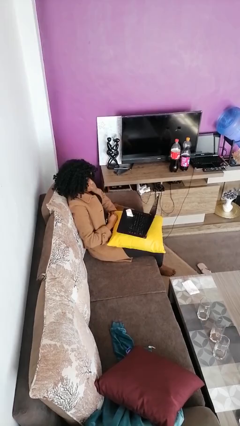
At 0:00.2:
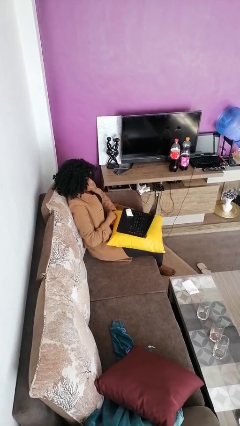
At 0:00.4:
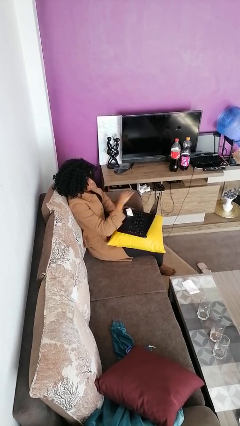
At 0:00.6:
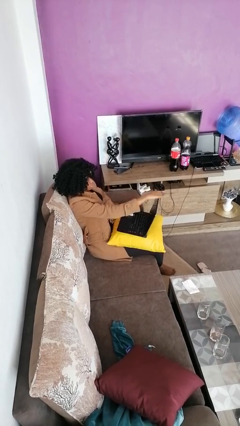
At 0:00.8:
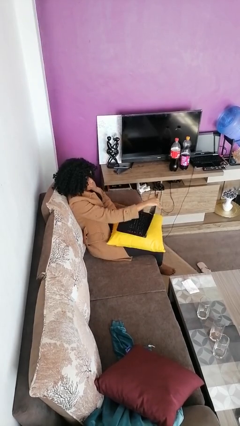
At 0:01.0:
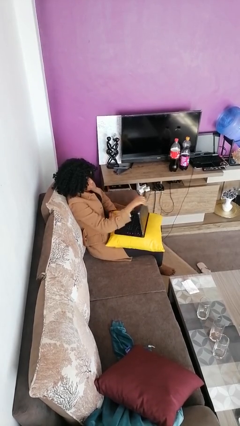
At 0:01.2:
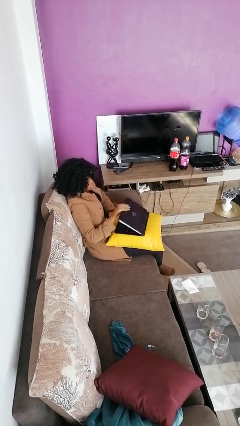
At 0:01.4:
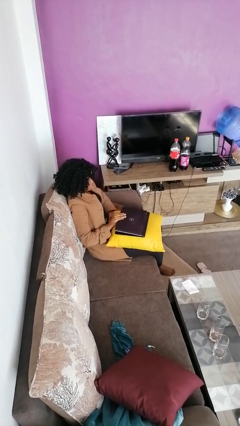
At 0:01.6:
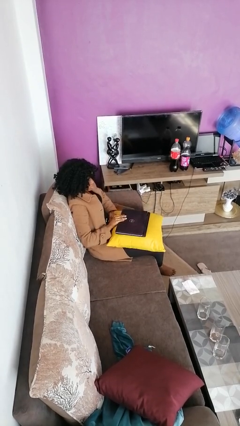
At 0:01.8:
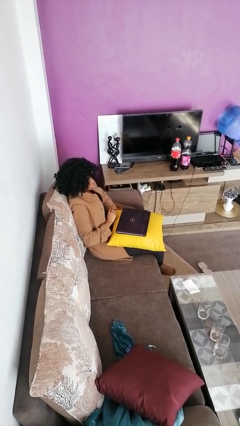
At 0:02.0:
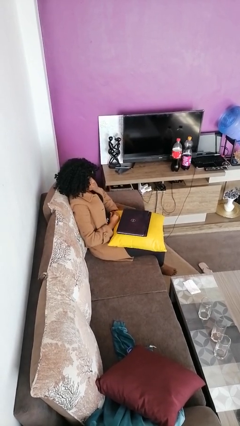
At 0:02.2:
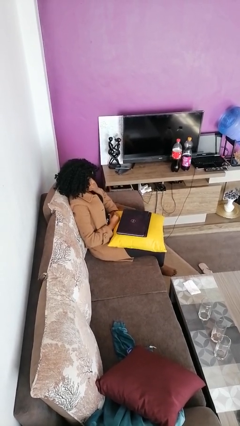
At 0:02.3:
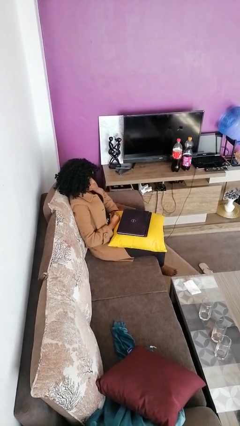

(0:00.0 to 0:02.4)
person closes laptop

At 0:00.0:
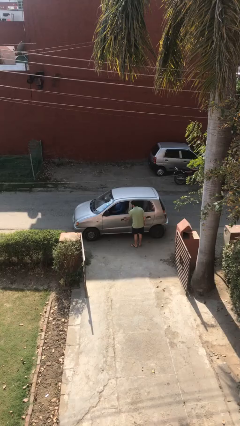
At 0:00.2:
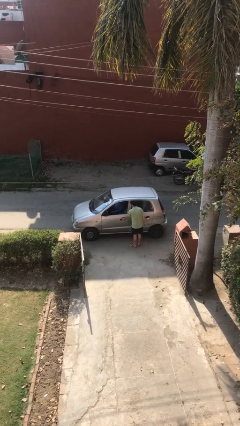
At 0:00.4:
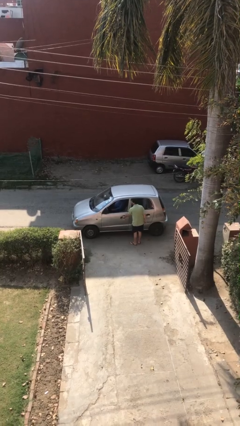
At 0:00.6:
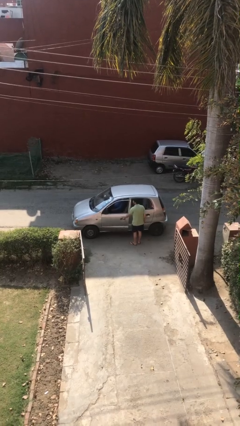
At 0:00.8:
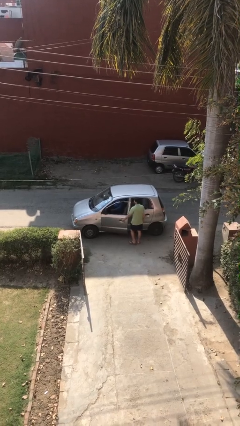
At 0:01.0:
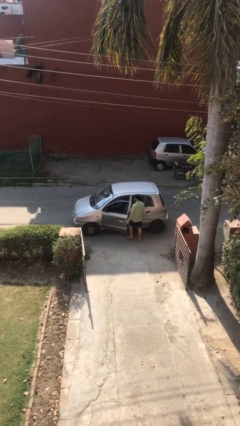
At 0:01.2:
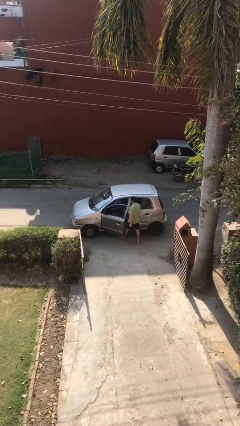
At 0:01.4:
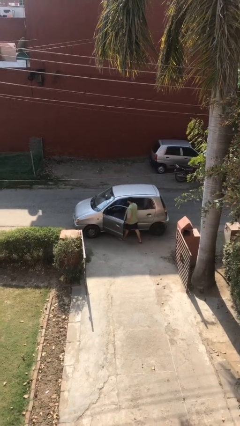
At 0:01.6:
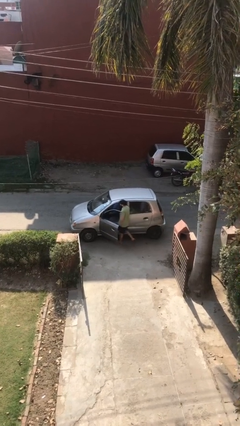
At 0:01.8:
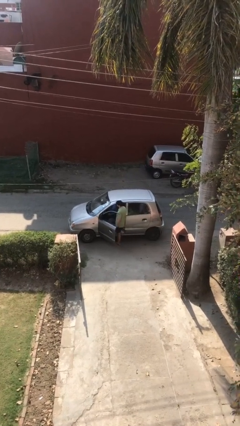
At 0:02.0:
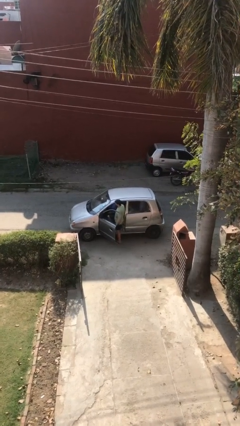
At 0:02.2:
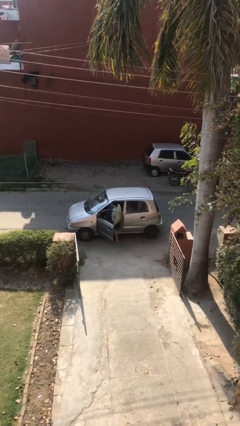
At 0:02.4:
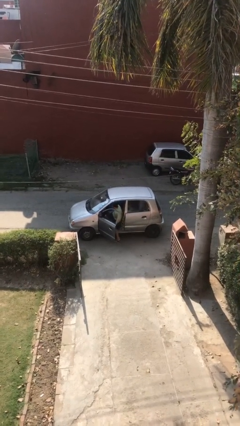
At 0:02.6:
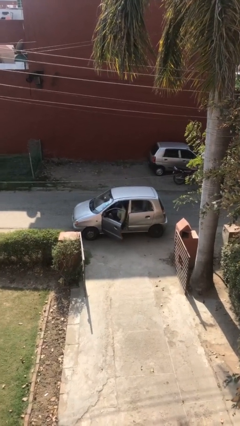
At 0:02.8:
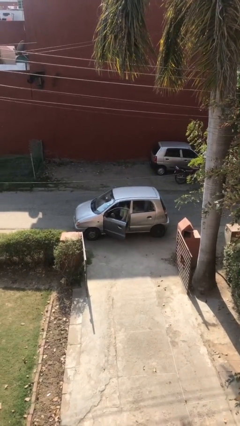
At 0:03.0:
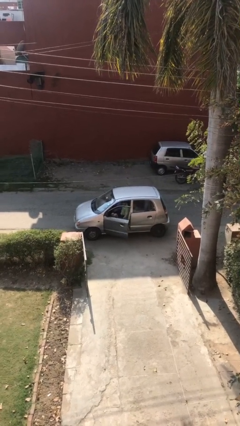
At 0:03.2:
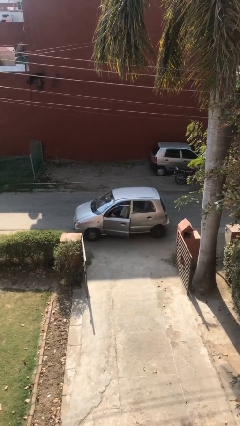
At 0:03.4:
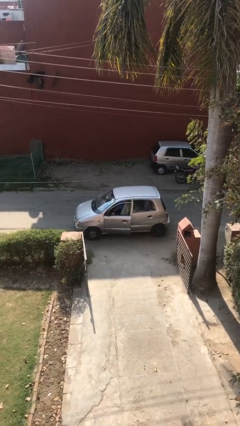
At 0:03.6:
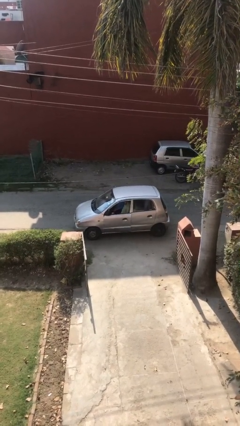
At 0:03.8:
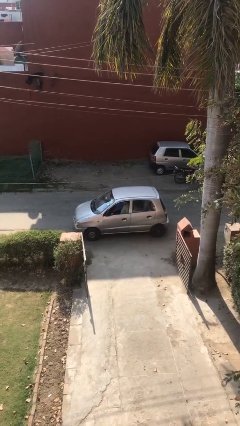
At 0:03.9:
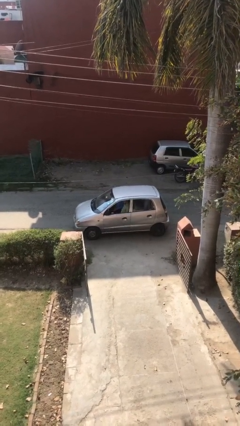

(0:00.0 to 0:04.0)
car picks up person

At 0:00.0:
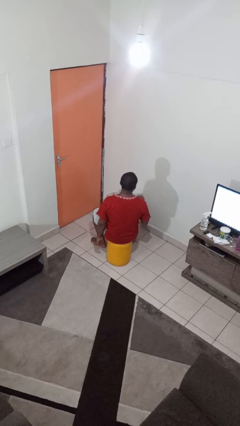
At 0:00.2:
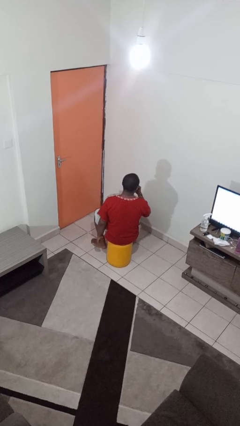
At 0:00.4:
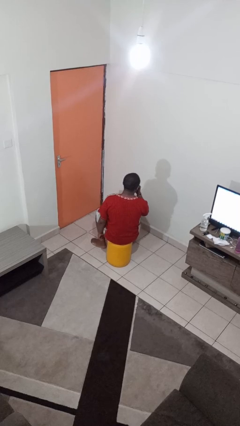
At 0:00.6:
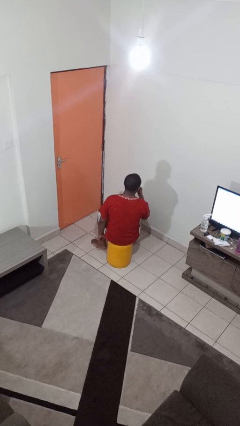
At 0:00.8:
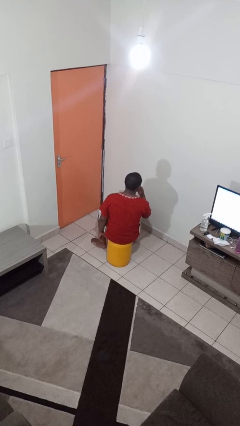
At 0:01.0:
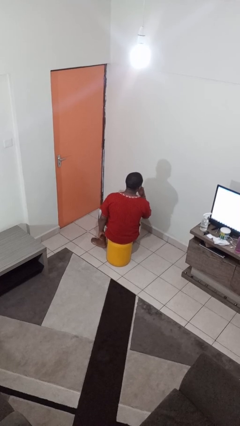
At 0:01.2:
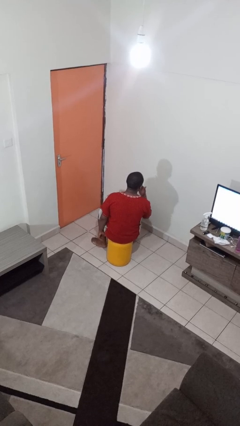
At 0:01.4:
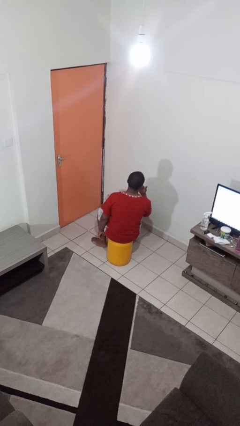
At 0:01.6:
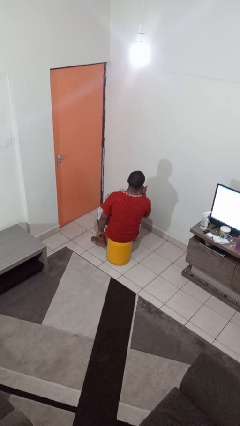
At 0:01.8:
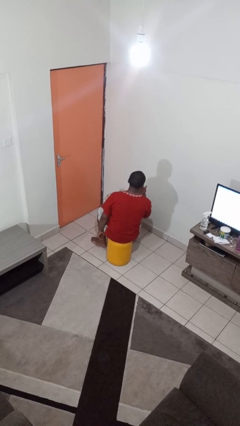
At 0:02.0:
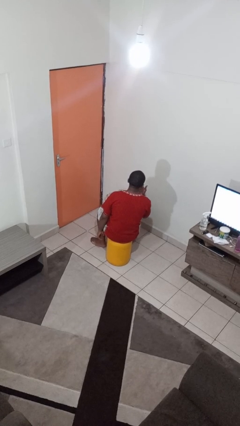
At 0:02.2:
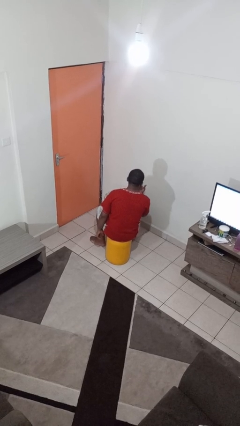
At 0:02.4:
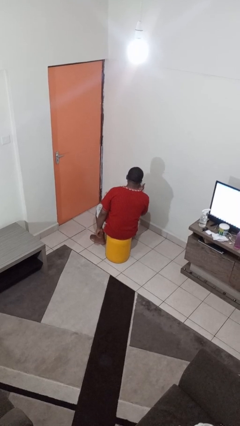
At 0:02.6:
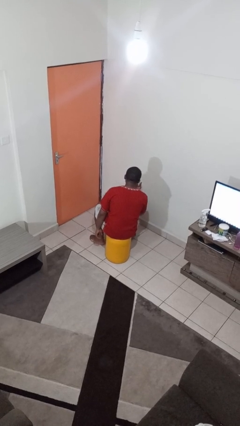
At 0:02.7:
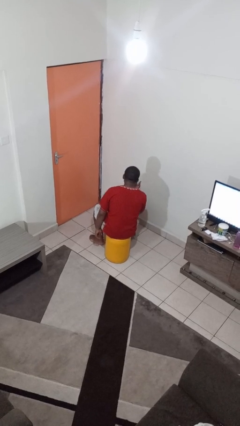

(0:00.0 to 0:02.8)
person licks fingers

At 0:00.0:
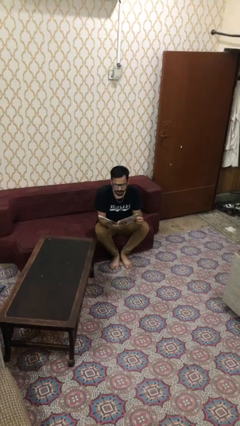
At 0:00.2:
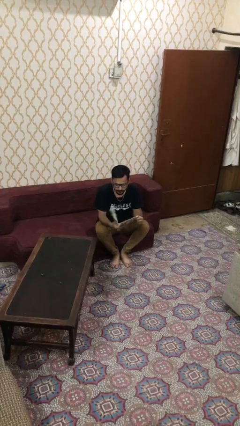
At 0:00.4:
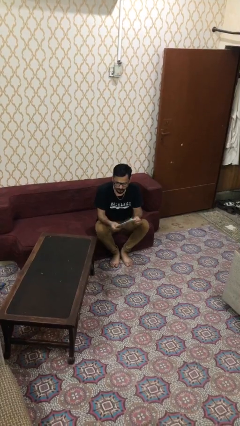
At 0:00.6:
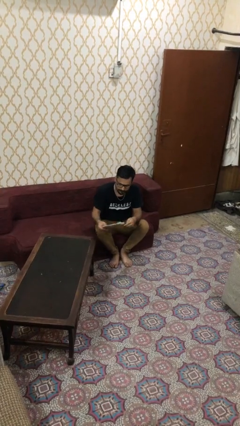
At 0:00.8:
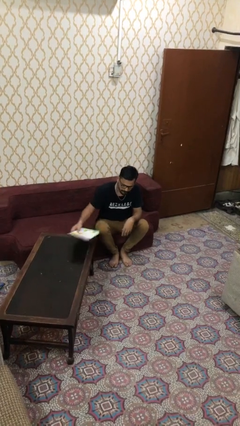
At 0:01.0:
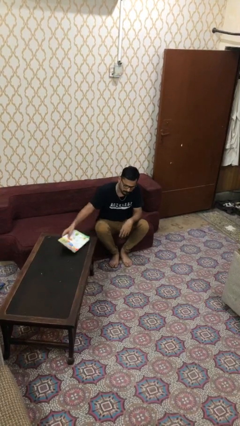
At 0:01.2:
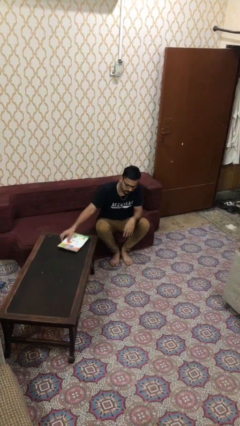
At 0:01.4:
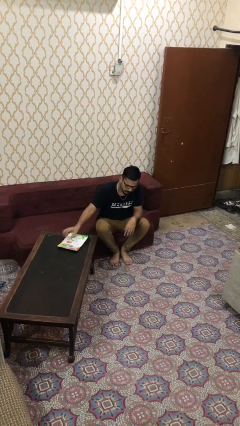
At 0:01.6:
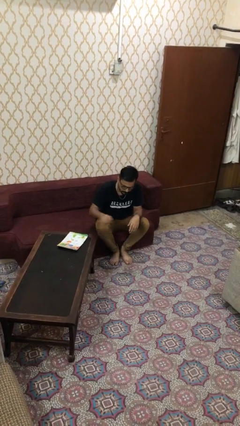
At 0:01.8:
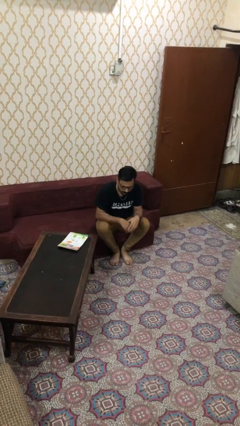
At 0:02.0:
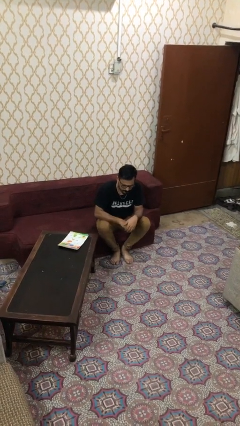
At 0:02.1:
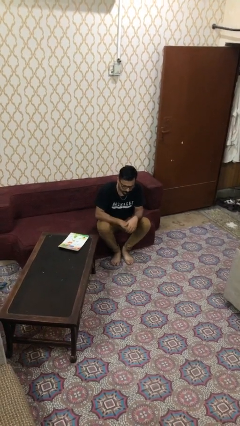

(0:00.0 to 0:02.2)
person puts down object on table

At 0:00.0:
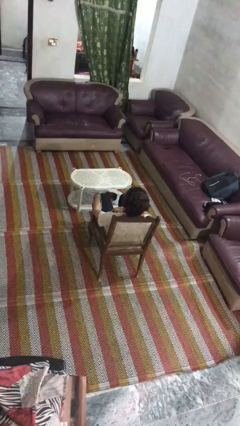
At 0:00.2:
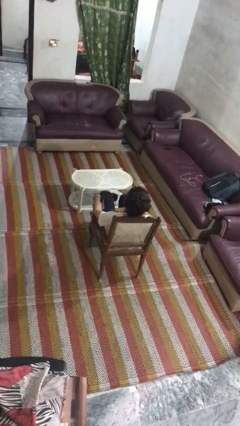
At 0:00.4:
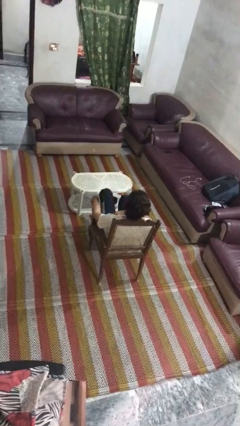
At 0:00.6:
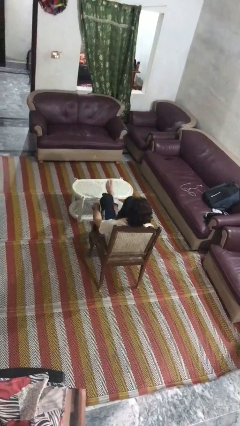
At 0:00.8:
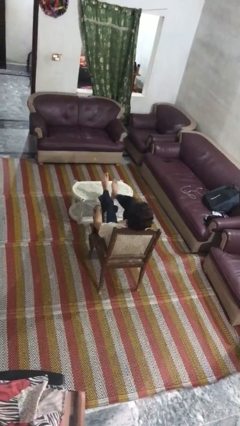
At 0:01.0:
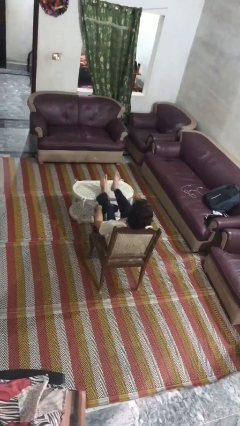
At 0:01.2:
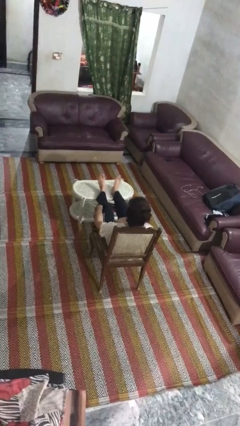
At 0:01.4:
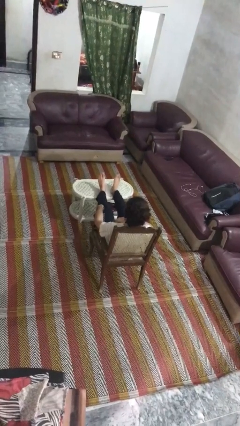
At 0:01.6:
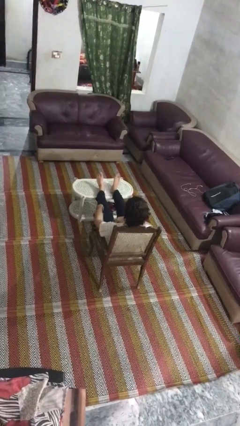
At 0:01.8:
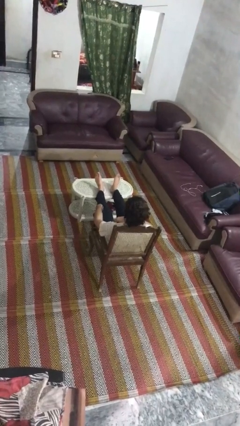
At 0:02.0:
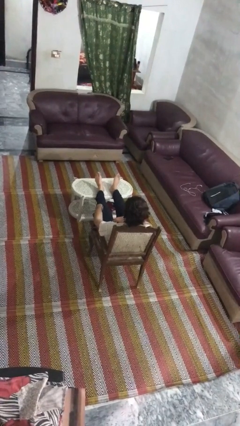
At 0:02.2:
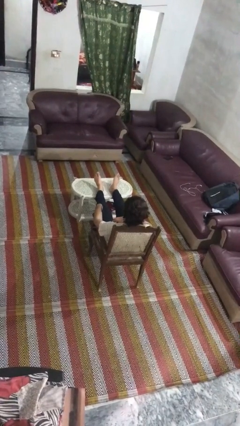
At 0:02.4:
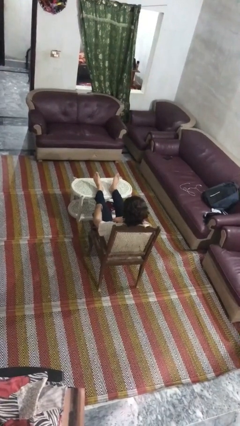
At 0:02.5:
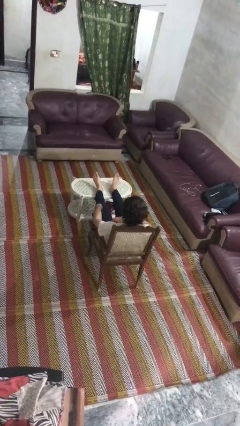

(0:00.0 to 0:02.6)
person puts feet up

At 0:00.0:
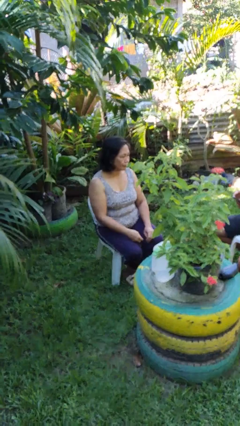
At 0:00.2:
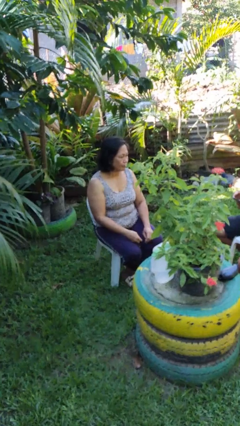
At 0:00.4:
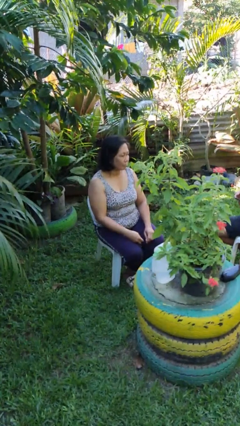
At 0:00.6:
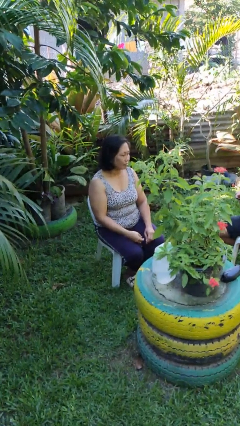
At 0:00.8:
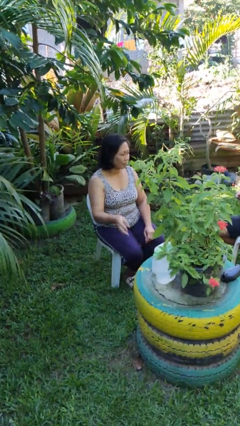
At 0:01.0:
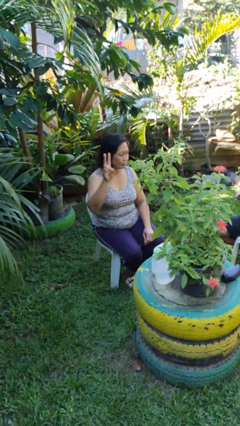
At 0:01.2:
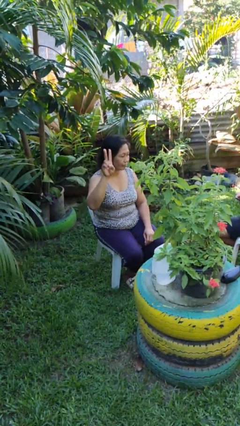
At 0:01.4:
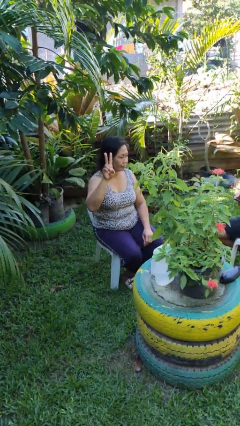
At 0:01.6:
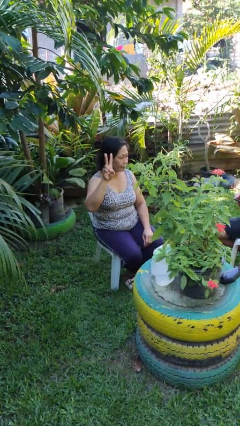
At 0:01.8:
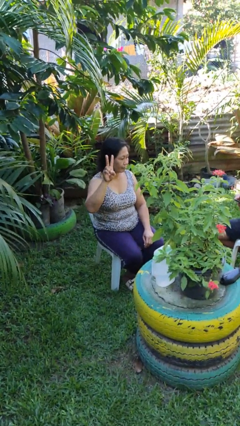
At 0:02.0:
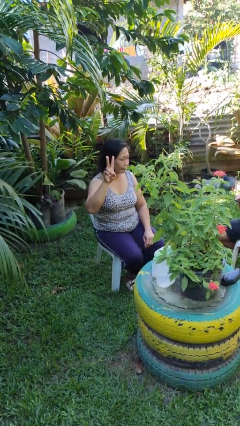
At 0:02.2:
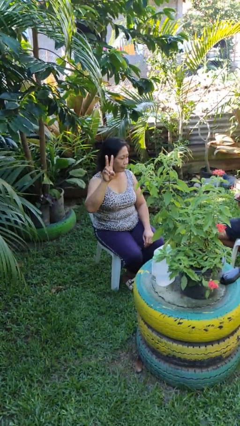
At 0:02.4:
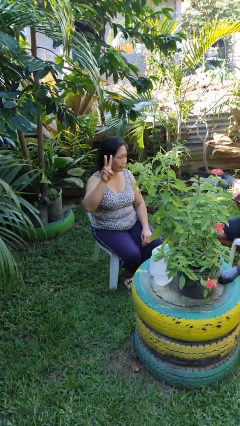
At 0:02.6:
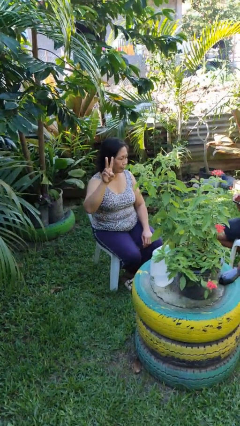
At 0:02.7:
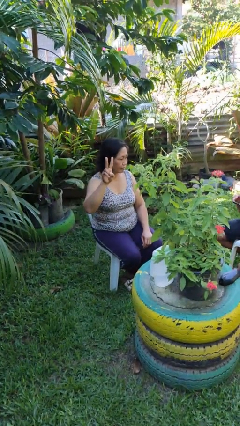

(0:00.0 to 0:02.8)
person gestures peace

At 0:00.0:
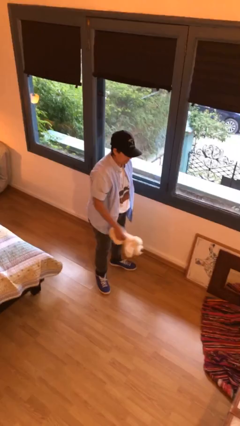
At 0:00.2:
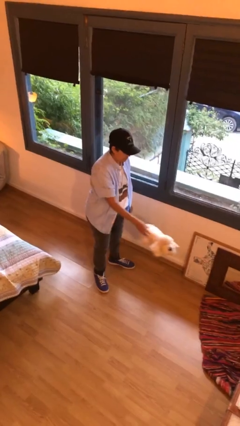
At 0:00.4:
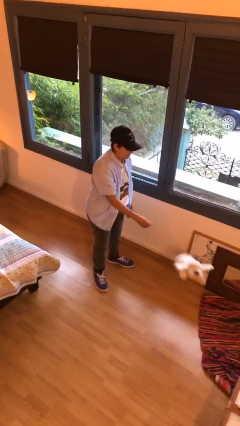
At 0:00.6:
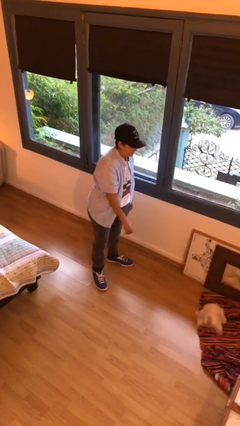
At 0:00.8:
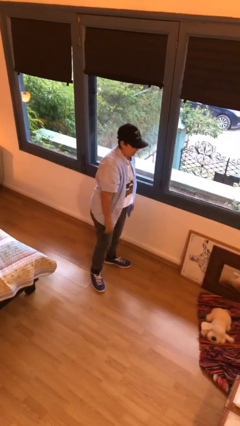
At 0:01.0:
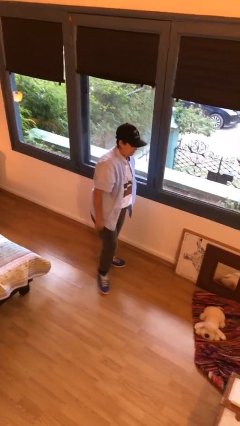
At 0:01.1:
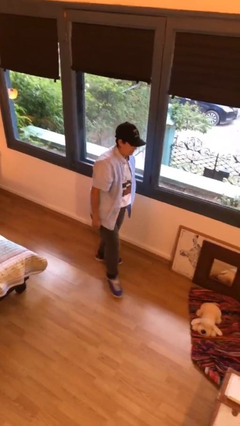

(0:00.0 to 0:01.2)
person throws object to ground
